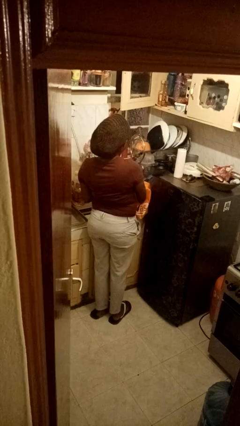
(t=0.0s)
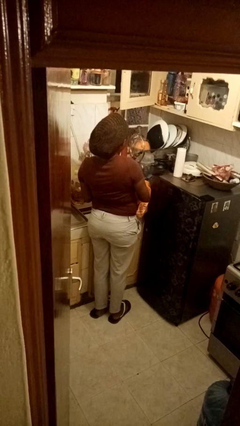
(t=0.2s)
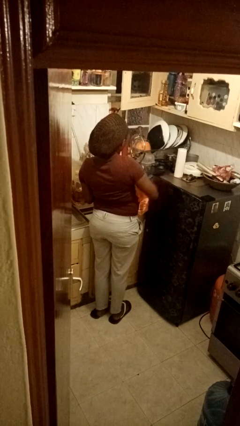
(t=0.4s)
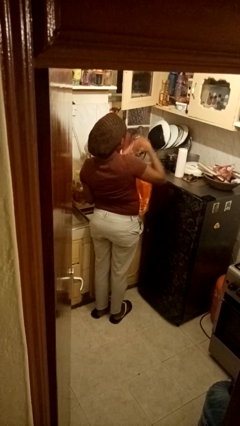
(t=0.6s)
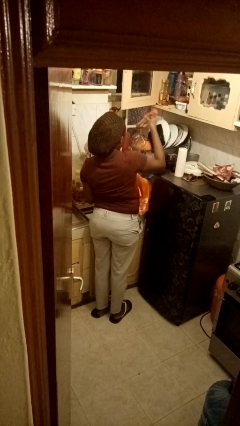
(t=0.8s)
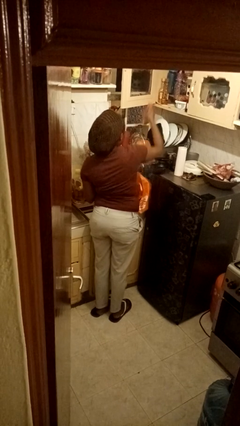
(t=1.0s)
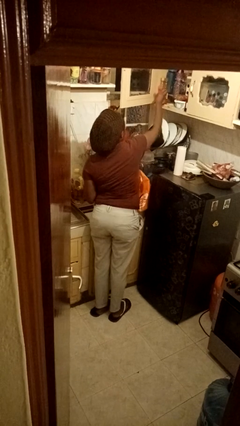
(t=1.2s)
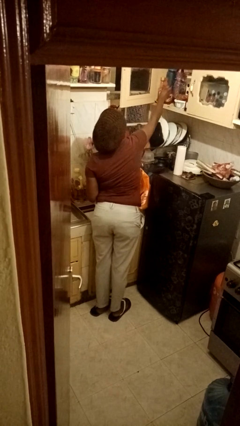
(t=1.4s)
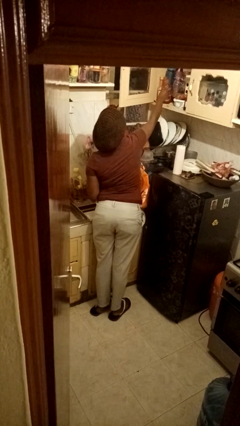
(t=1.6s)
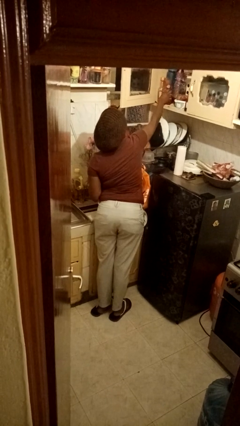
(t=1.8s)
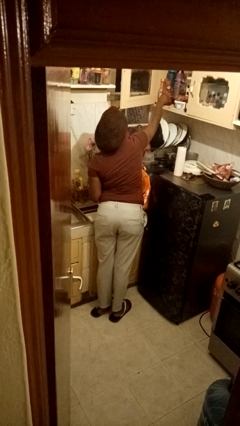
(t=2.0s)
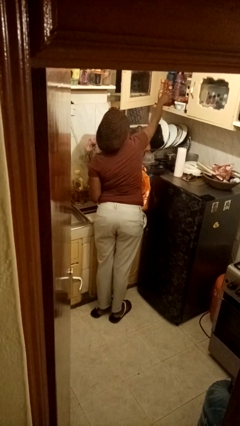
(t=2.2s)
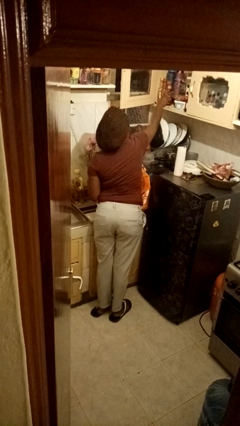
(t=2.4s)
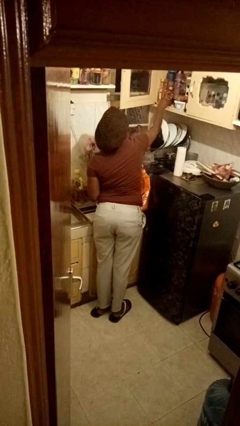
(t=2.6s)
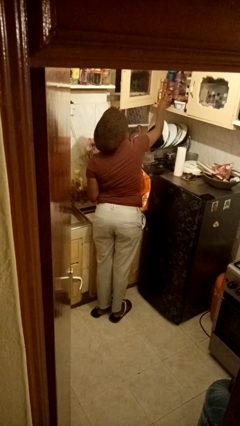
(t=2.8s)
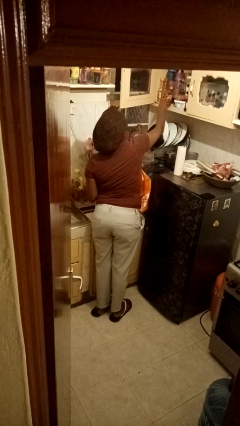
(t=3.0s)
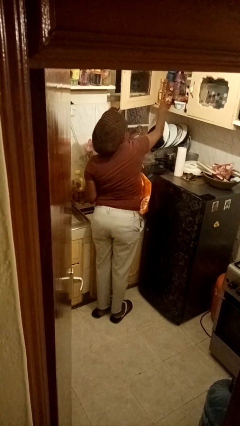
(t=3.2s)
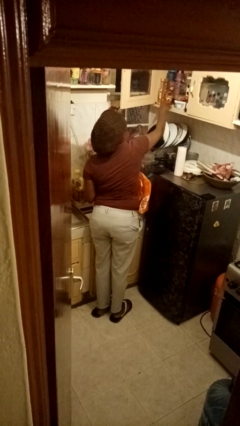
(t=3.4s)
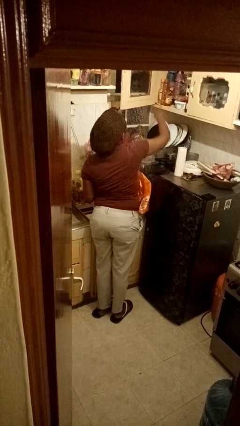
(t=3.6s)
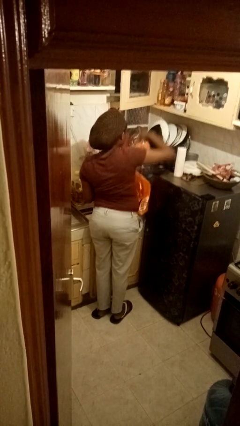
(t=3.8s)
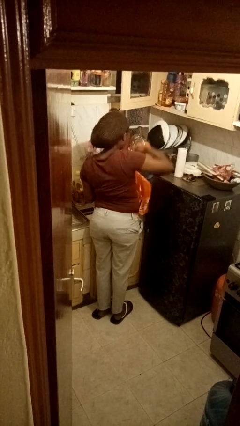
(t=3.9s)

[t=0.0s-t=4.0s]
person loads groceries into cabinet

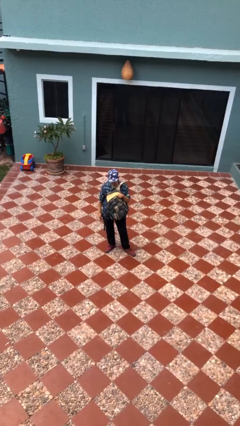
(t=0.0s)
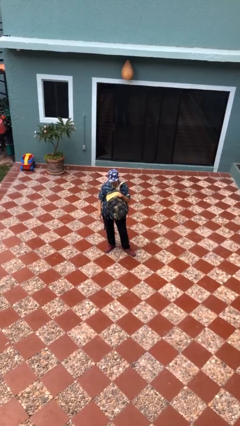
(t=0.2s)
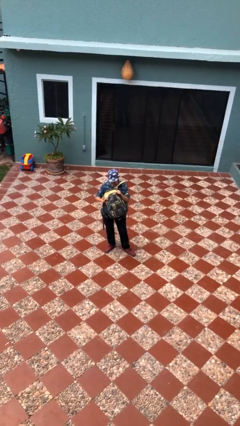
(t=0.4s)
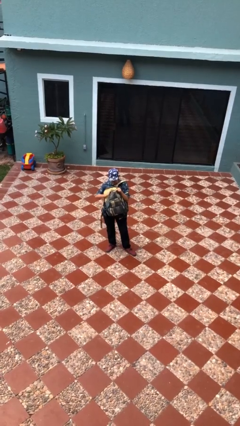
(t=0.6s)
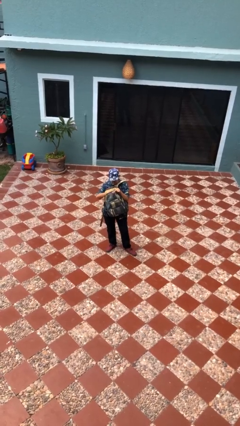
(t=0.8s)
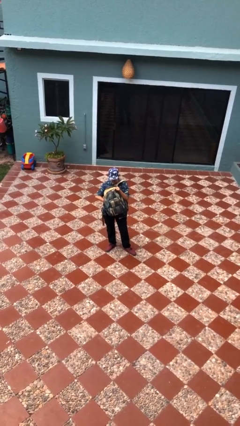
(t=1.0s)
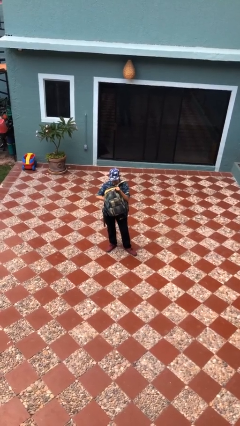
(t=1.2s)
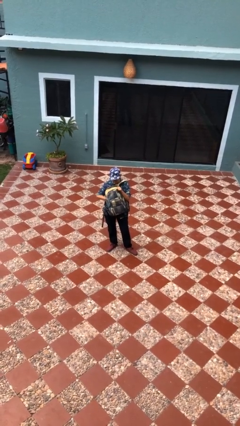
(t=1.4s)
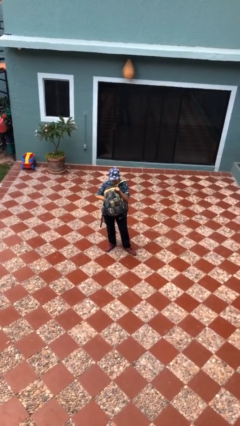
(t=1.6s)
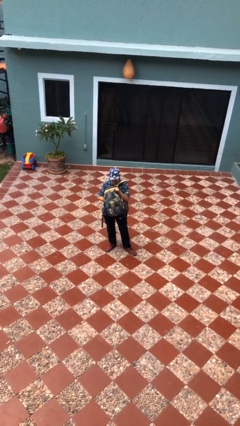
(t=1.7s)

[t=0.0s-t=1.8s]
person searches in backpack

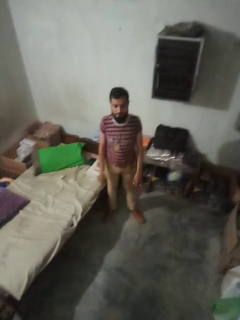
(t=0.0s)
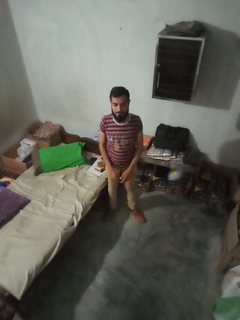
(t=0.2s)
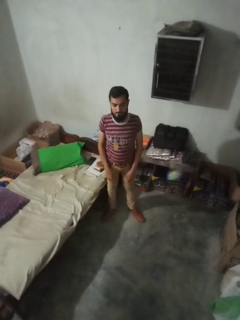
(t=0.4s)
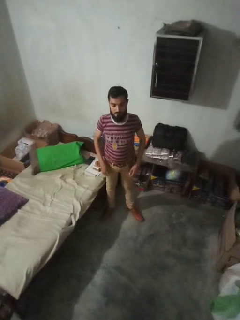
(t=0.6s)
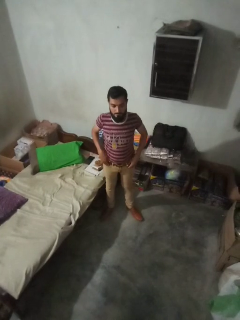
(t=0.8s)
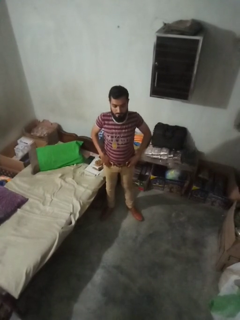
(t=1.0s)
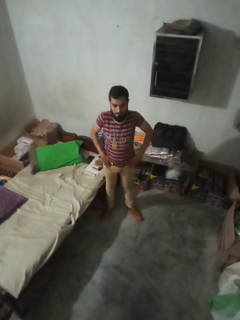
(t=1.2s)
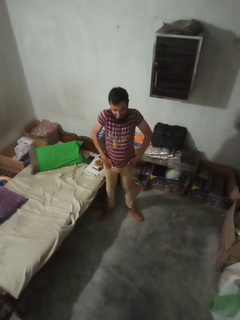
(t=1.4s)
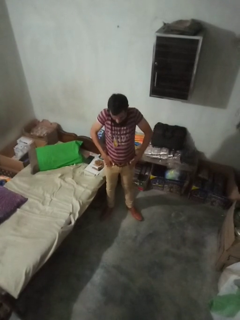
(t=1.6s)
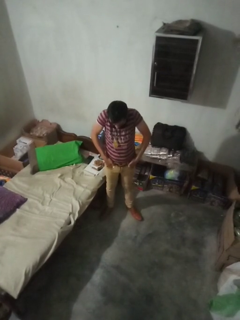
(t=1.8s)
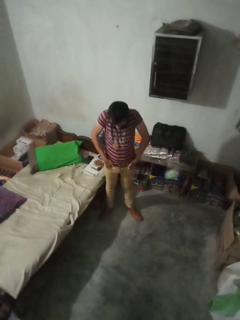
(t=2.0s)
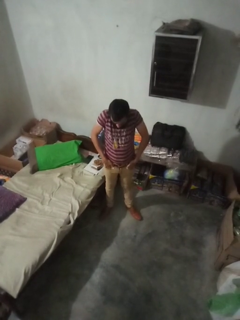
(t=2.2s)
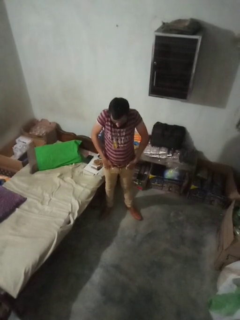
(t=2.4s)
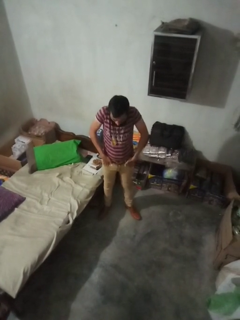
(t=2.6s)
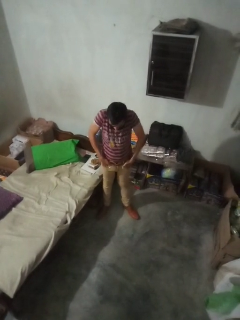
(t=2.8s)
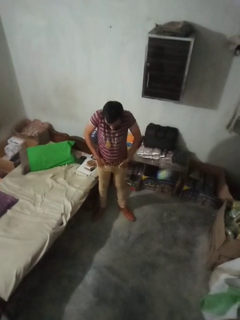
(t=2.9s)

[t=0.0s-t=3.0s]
person puts hands in back pockets

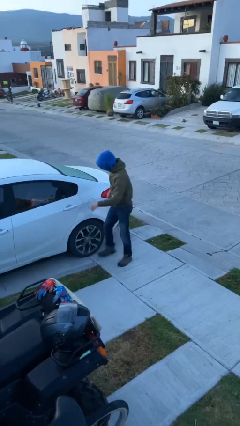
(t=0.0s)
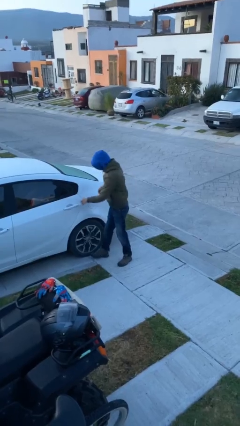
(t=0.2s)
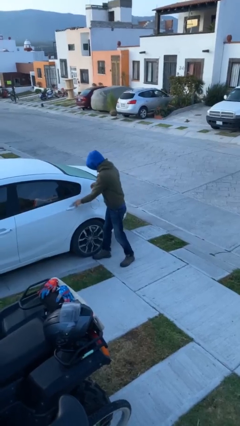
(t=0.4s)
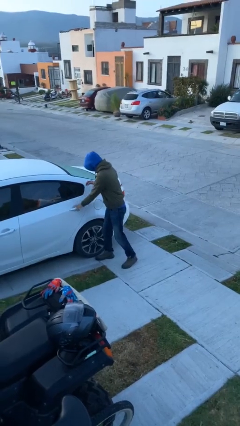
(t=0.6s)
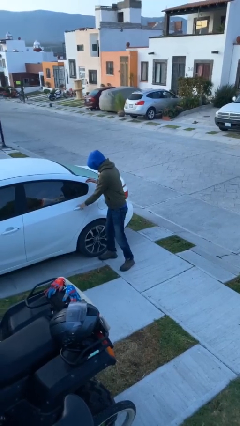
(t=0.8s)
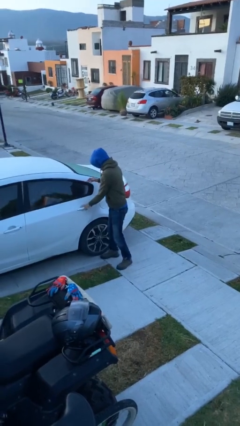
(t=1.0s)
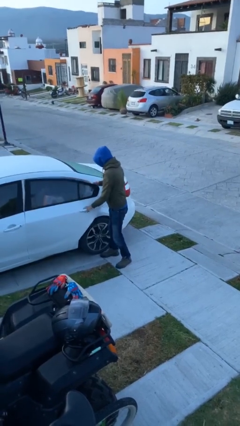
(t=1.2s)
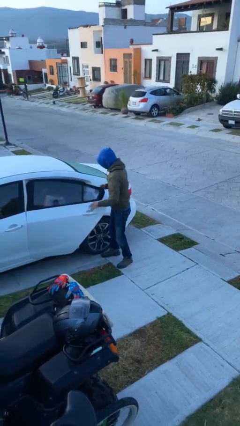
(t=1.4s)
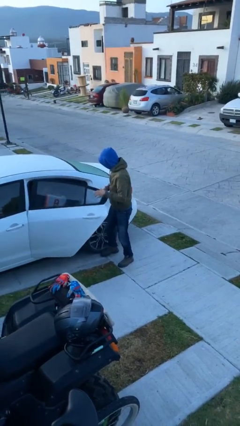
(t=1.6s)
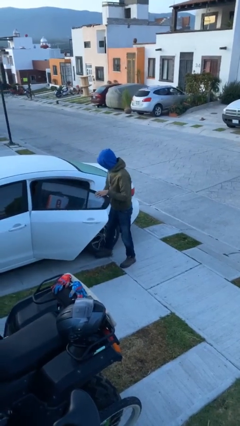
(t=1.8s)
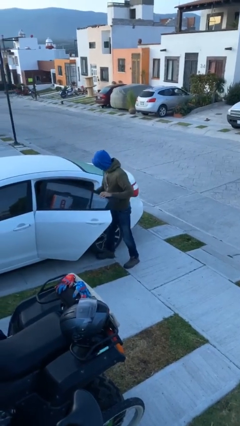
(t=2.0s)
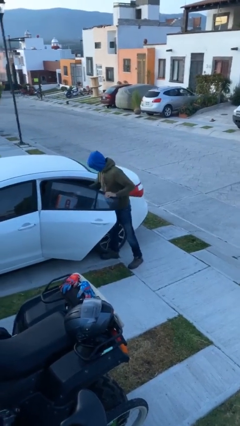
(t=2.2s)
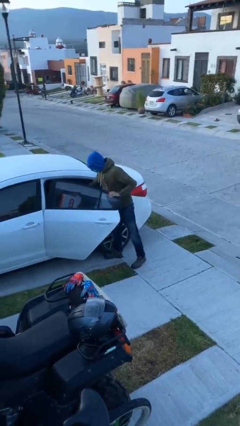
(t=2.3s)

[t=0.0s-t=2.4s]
person opens car door

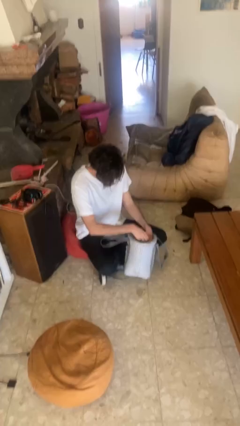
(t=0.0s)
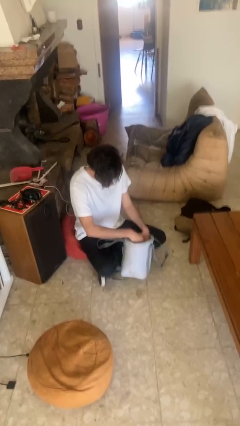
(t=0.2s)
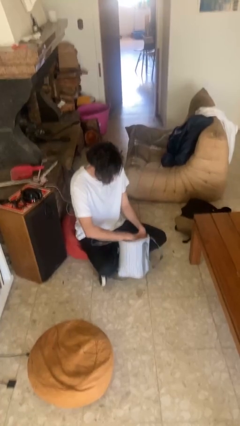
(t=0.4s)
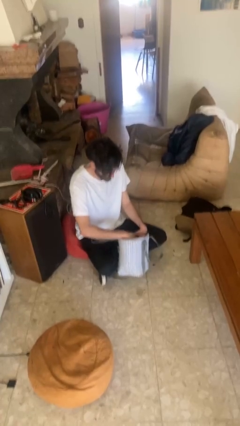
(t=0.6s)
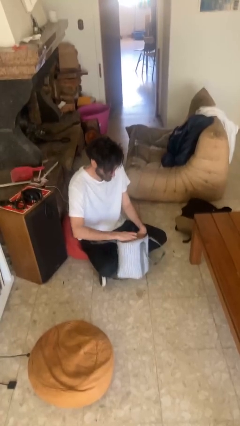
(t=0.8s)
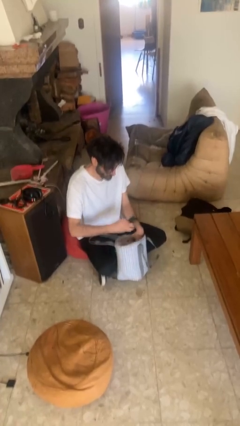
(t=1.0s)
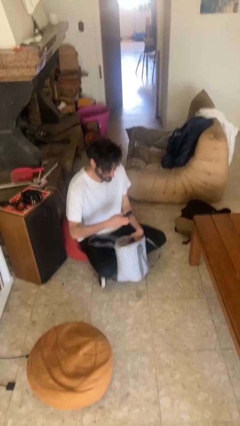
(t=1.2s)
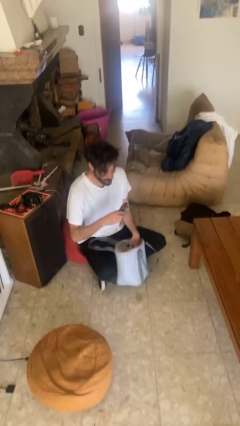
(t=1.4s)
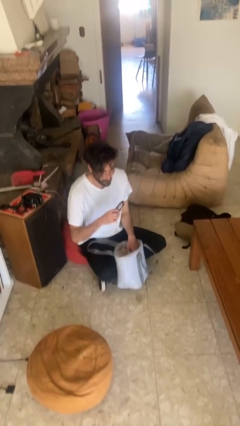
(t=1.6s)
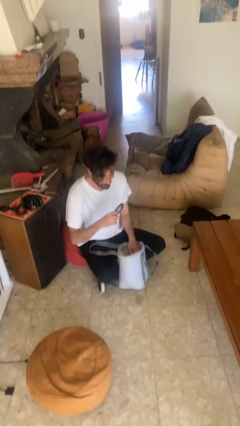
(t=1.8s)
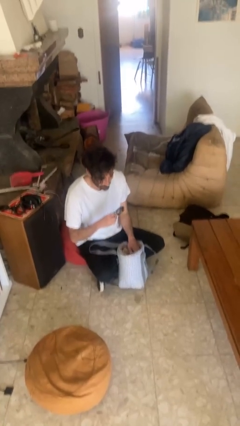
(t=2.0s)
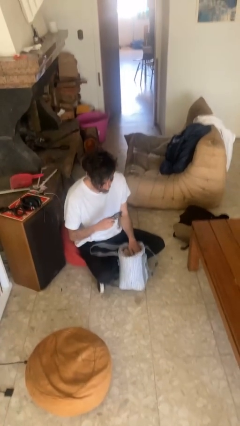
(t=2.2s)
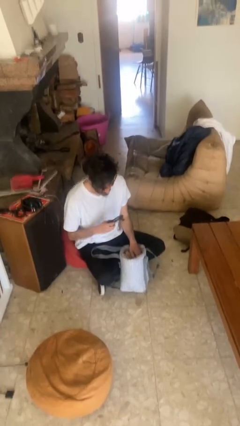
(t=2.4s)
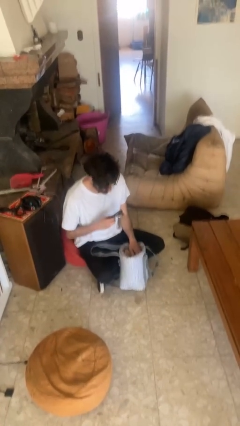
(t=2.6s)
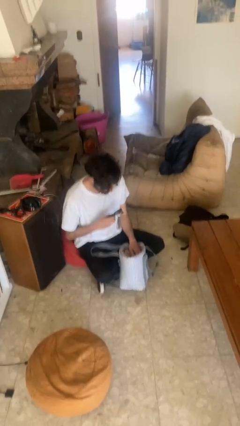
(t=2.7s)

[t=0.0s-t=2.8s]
person takes object from purse

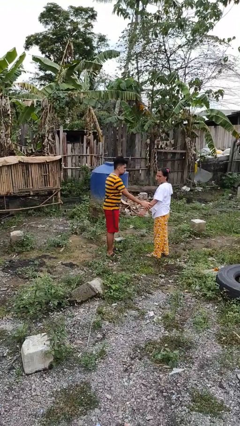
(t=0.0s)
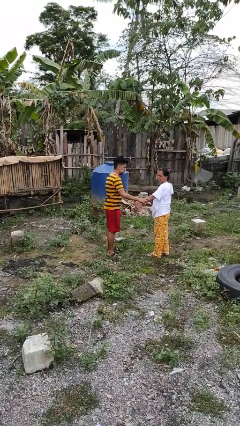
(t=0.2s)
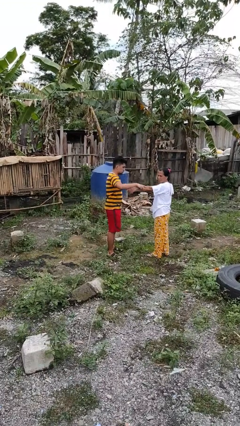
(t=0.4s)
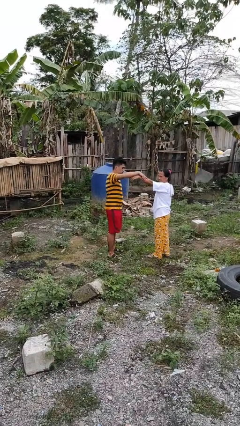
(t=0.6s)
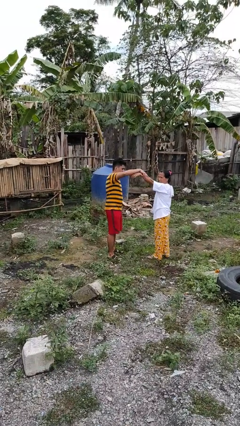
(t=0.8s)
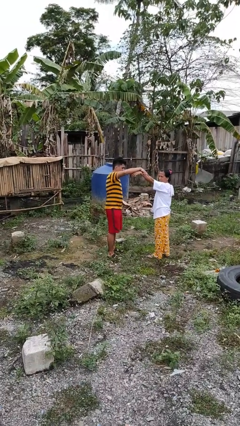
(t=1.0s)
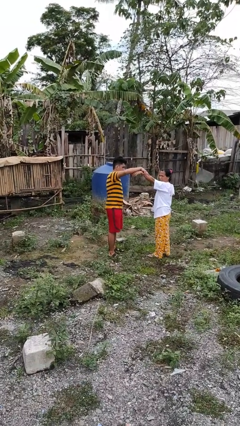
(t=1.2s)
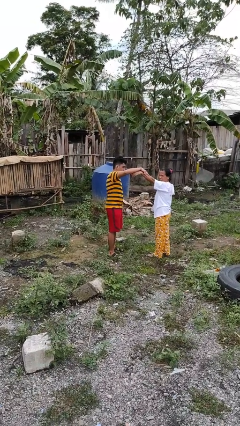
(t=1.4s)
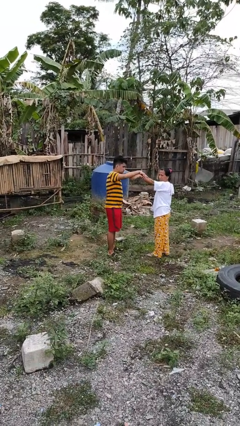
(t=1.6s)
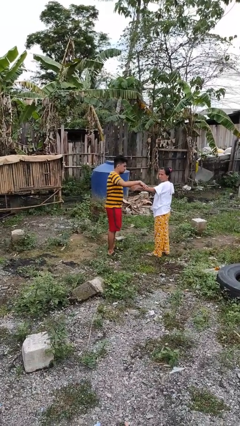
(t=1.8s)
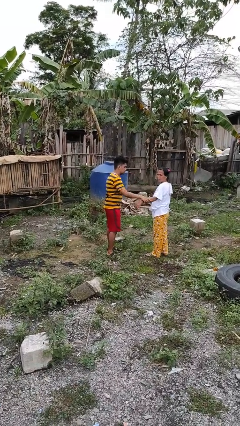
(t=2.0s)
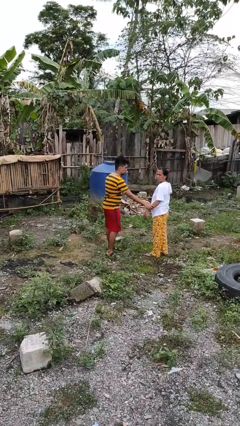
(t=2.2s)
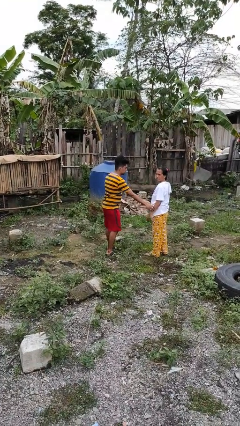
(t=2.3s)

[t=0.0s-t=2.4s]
person grabs person by forearm

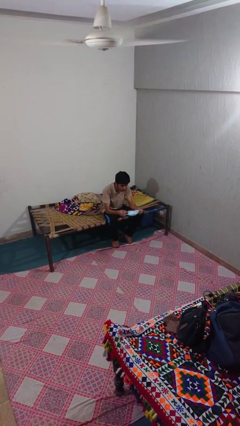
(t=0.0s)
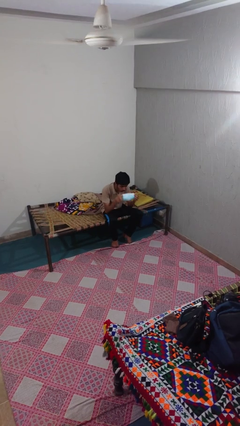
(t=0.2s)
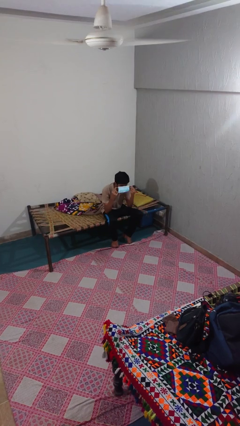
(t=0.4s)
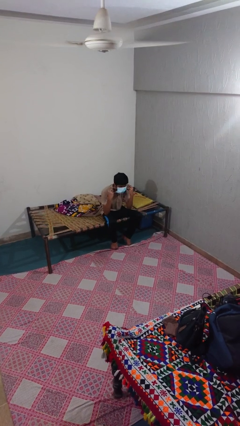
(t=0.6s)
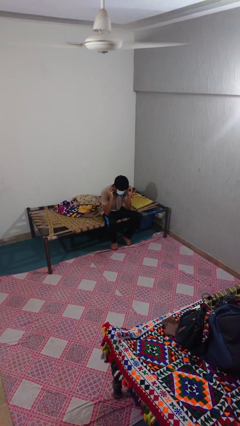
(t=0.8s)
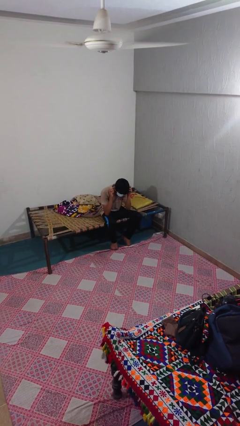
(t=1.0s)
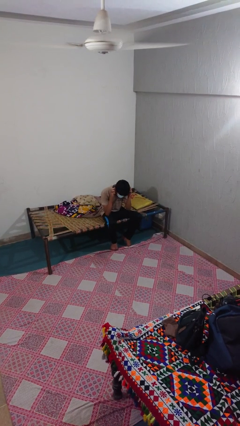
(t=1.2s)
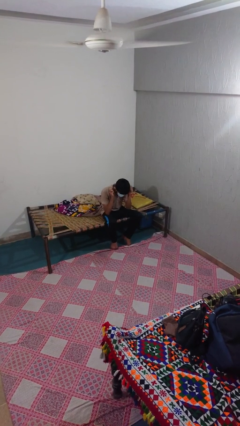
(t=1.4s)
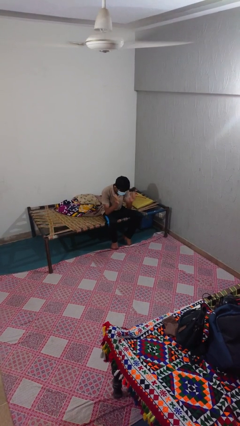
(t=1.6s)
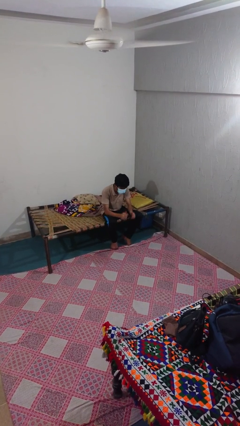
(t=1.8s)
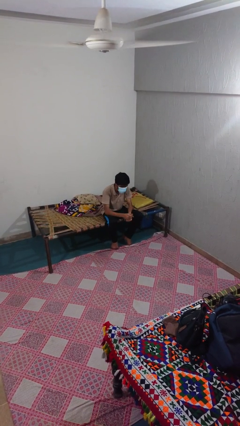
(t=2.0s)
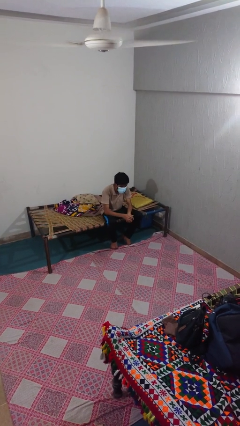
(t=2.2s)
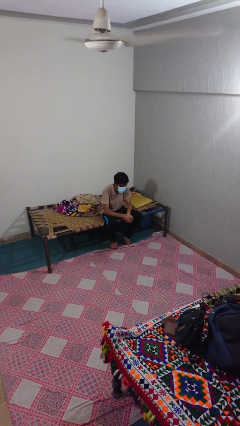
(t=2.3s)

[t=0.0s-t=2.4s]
person puts on facemask
